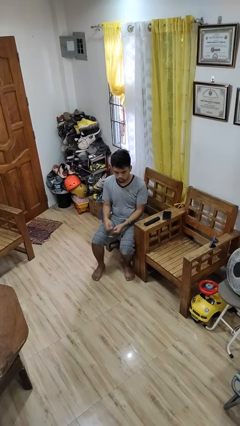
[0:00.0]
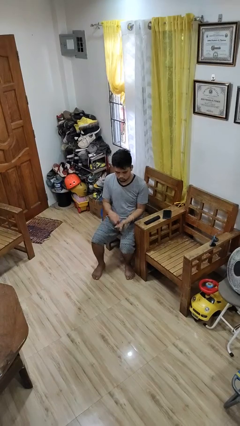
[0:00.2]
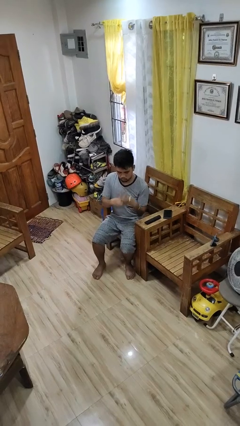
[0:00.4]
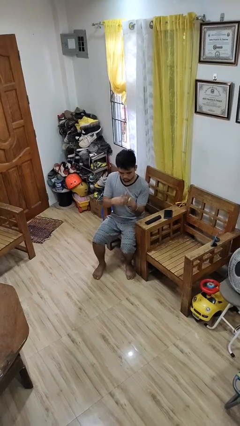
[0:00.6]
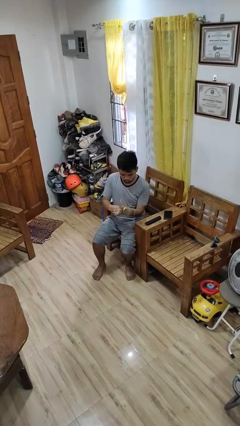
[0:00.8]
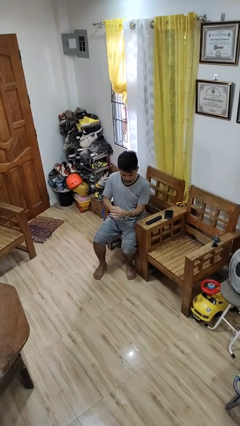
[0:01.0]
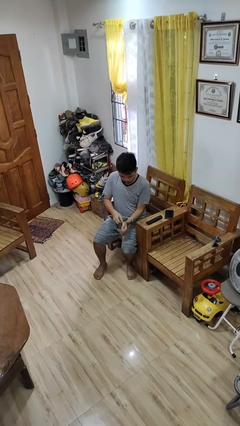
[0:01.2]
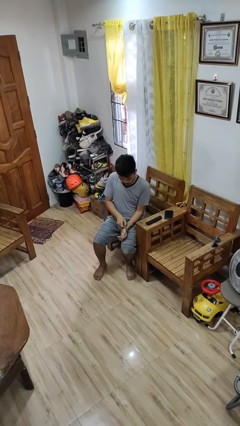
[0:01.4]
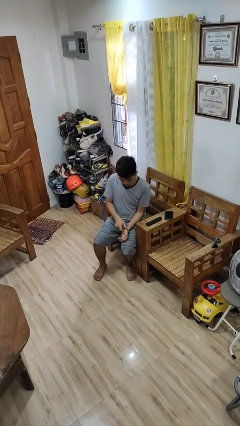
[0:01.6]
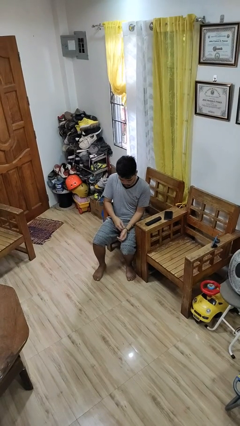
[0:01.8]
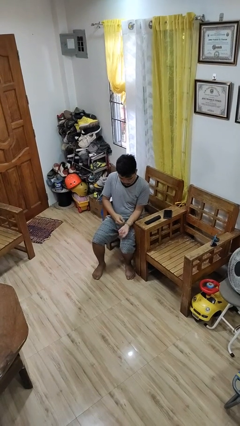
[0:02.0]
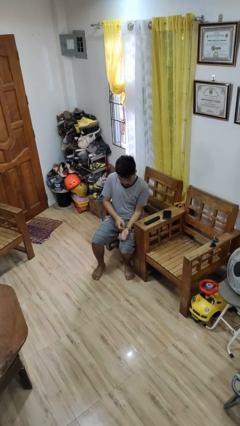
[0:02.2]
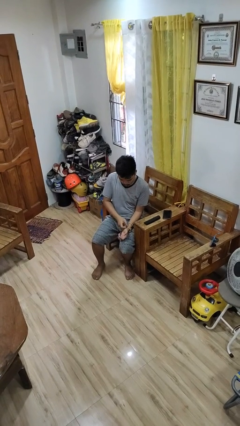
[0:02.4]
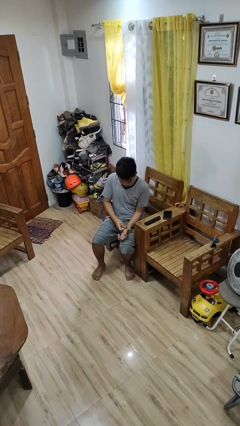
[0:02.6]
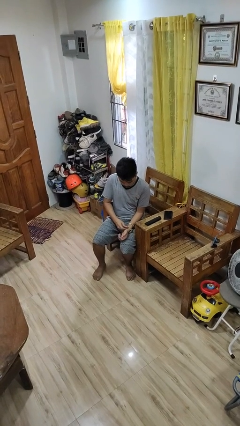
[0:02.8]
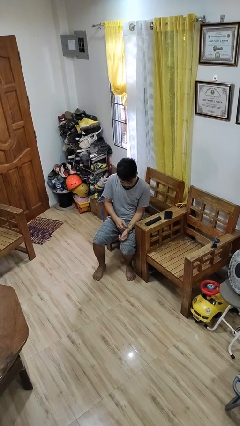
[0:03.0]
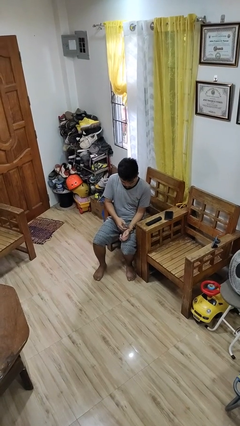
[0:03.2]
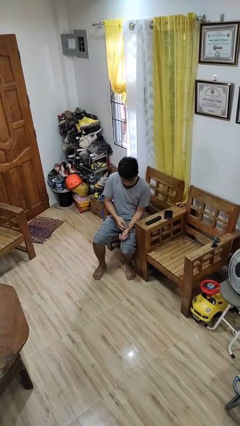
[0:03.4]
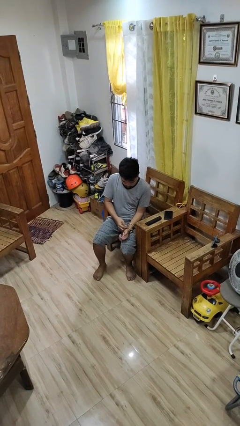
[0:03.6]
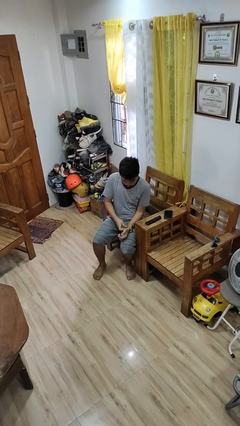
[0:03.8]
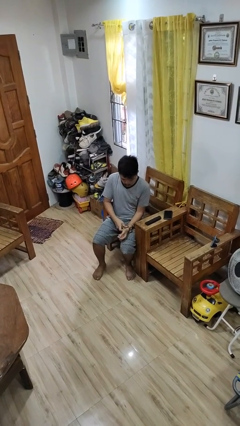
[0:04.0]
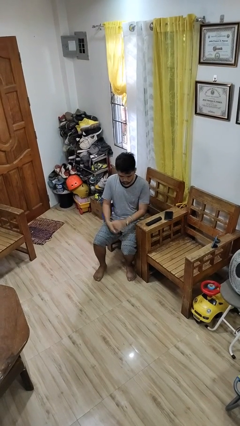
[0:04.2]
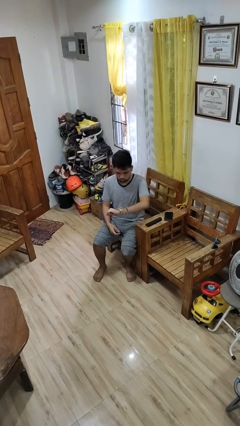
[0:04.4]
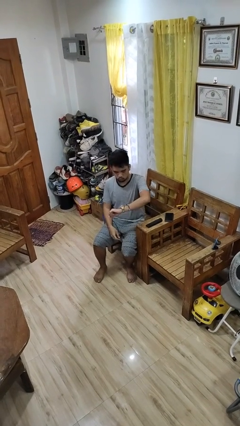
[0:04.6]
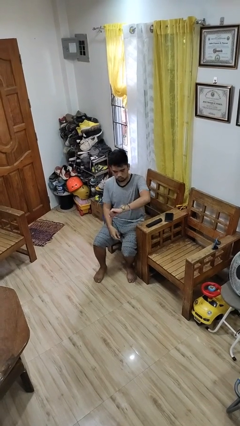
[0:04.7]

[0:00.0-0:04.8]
person puts on wristwatch

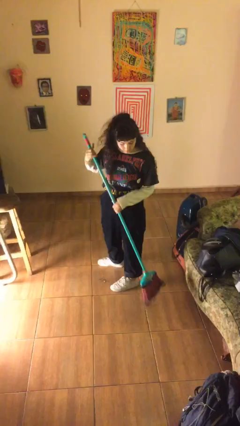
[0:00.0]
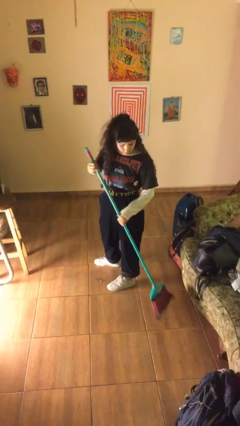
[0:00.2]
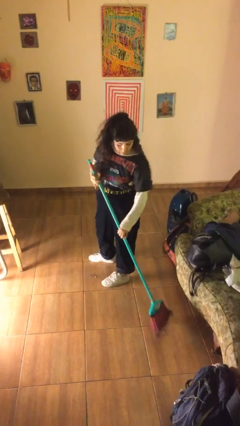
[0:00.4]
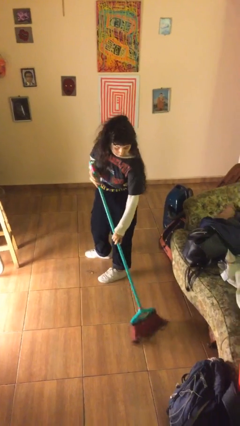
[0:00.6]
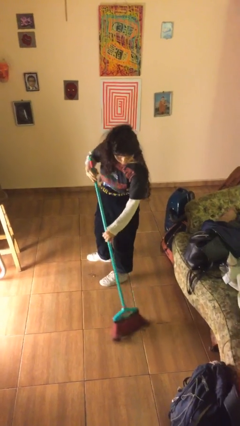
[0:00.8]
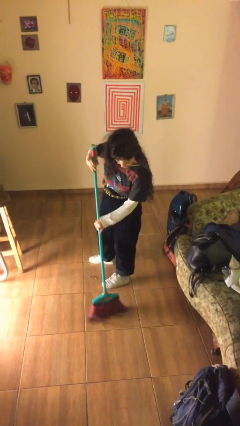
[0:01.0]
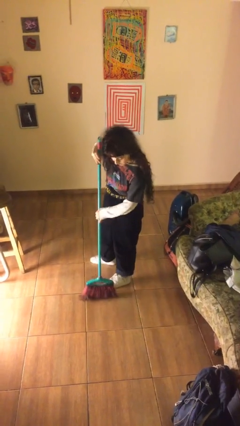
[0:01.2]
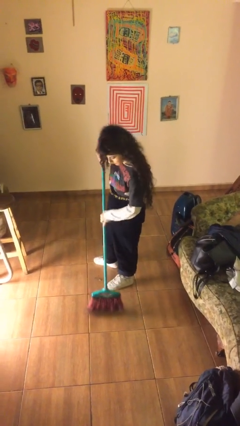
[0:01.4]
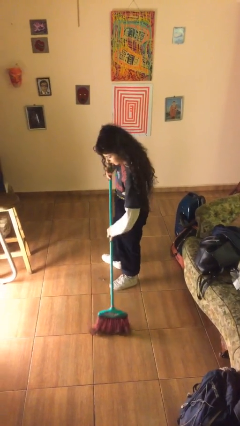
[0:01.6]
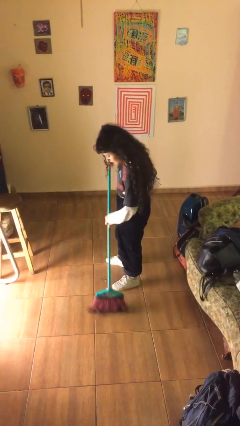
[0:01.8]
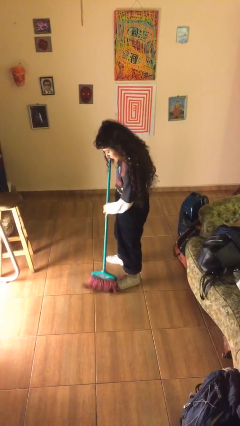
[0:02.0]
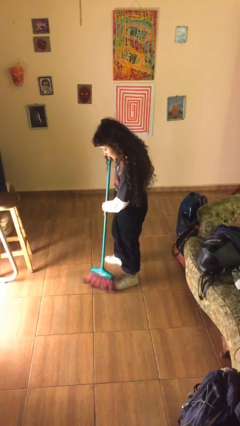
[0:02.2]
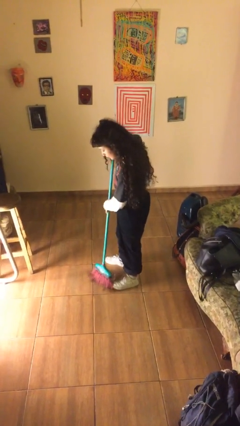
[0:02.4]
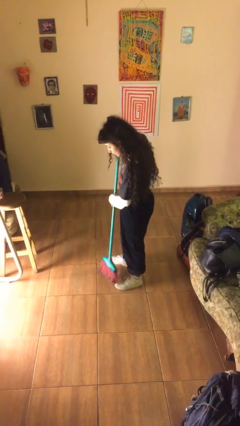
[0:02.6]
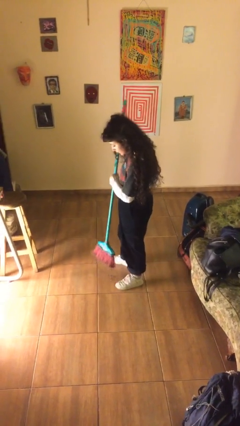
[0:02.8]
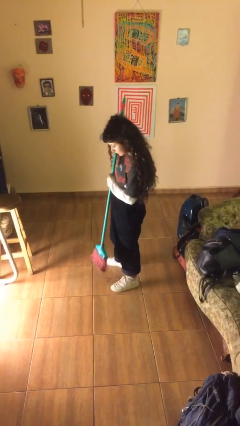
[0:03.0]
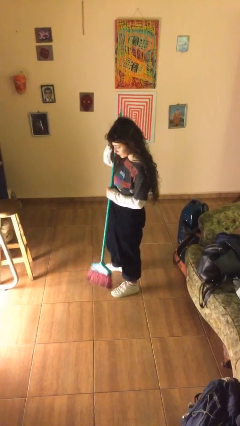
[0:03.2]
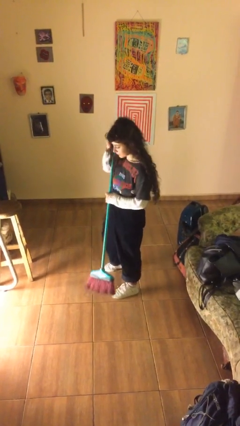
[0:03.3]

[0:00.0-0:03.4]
person sweeps floor

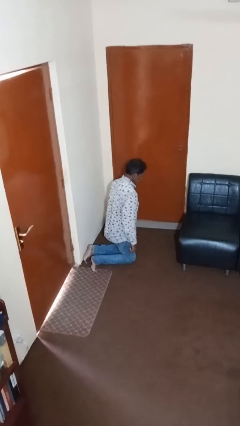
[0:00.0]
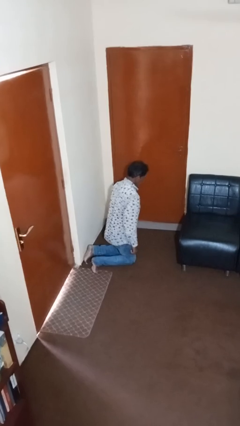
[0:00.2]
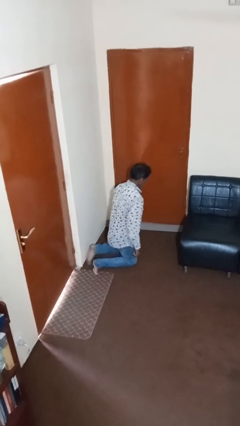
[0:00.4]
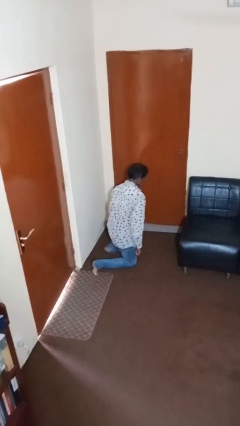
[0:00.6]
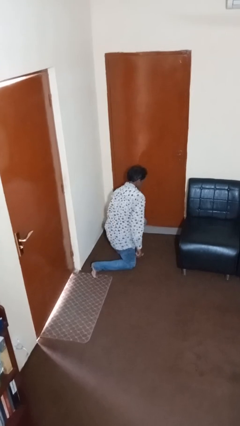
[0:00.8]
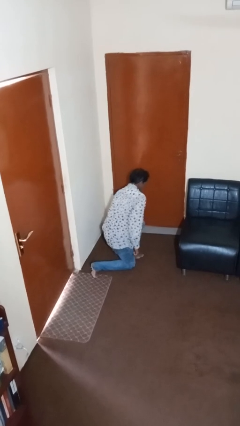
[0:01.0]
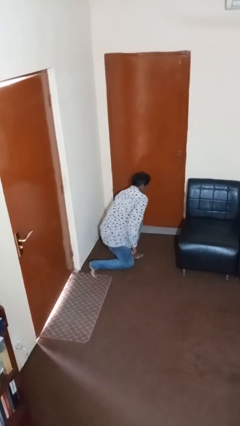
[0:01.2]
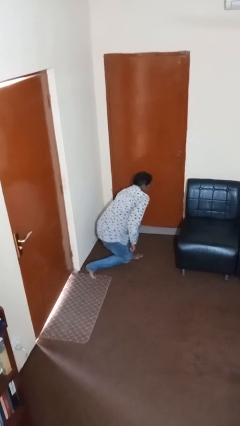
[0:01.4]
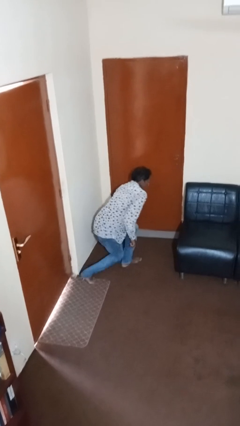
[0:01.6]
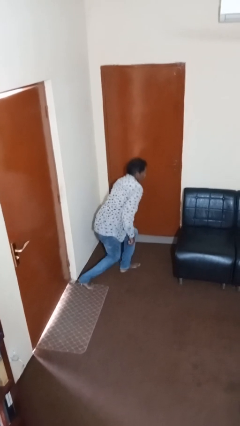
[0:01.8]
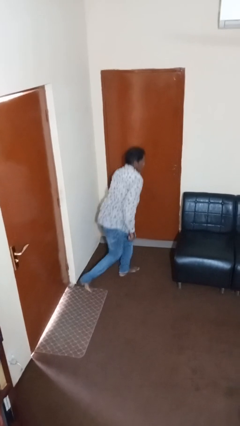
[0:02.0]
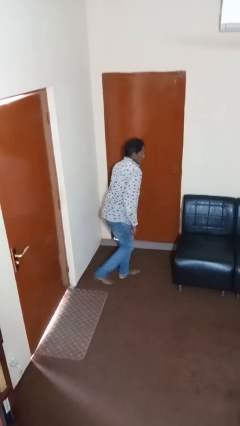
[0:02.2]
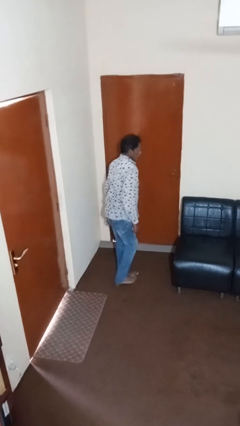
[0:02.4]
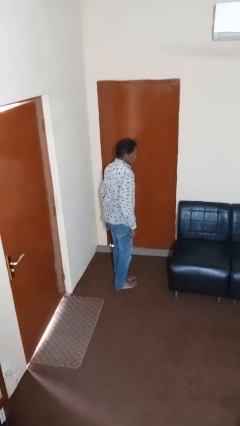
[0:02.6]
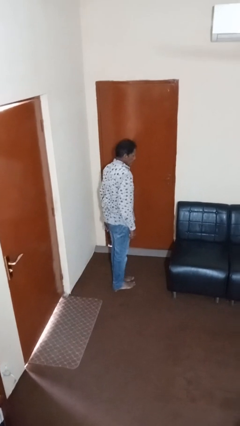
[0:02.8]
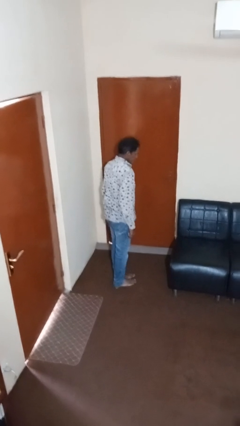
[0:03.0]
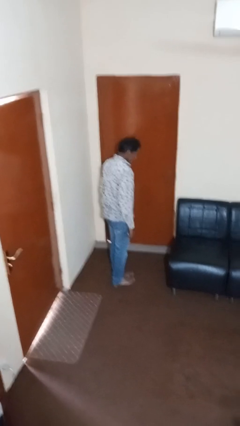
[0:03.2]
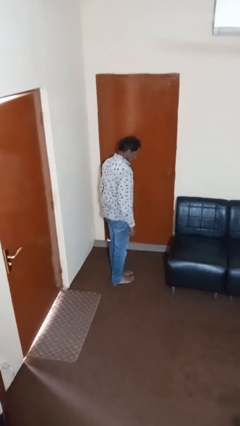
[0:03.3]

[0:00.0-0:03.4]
person stands up

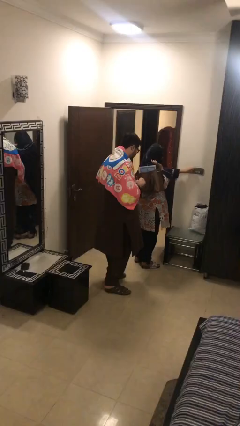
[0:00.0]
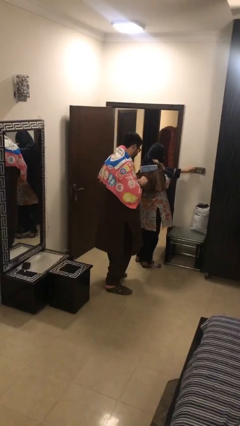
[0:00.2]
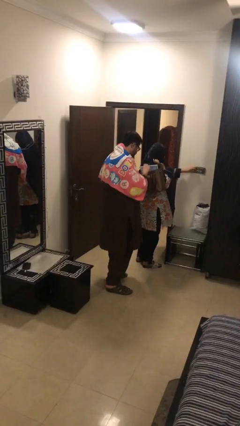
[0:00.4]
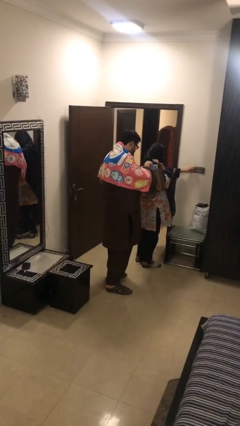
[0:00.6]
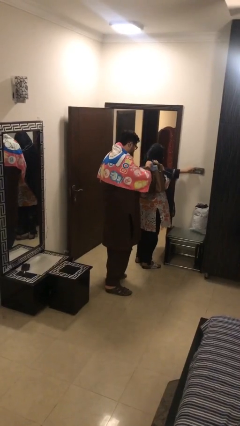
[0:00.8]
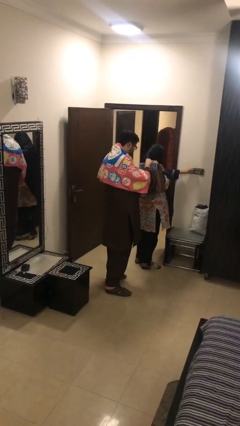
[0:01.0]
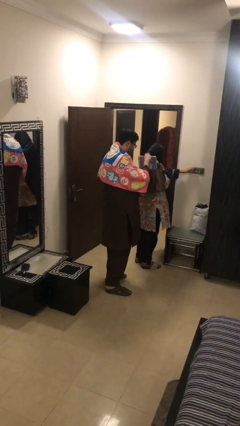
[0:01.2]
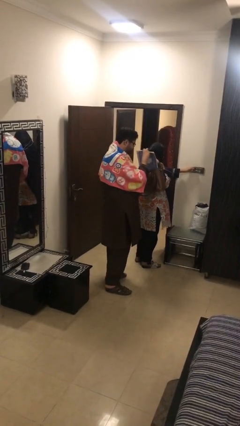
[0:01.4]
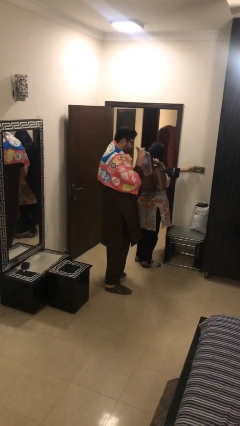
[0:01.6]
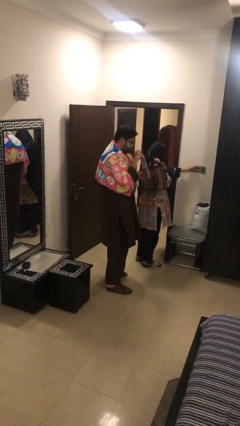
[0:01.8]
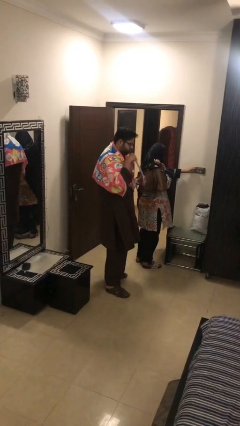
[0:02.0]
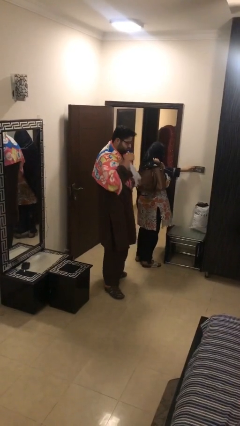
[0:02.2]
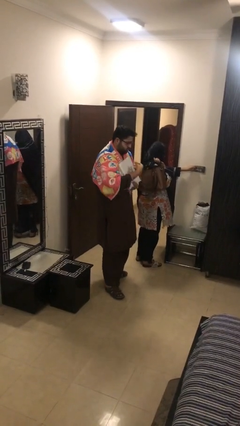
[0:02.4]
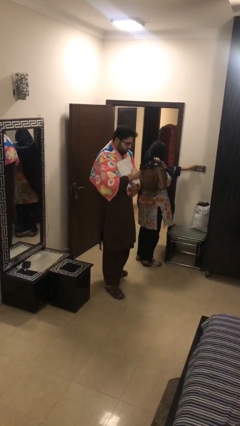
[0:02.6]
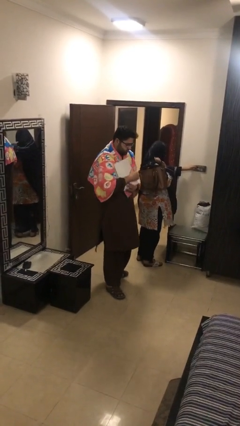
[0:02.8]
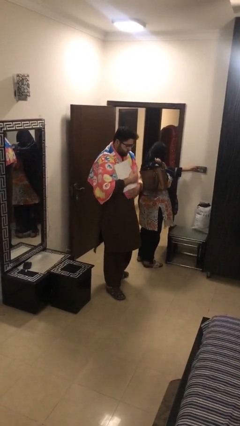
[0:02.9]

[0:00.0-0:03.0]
person steals object from person

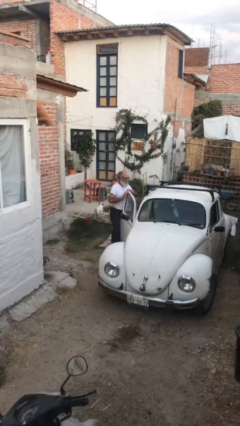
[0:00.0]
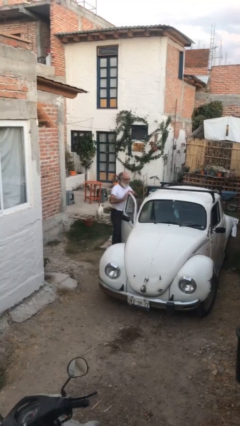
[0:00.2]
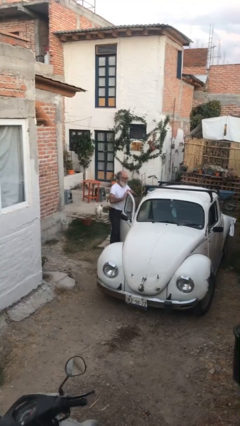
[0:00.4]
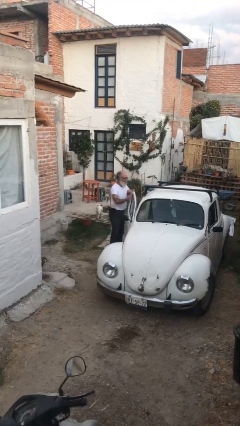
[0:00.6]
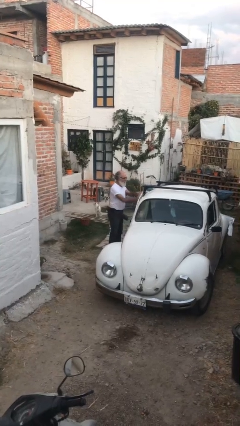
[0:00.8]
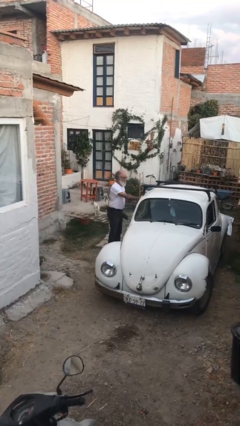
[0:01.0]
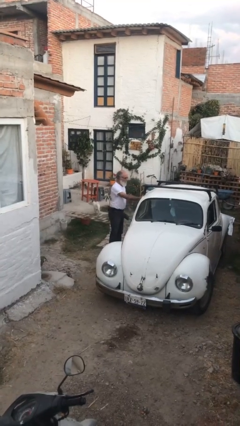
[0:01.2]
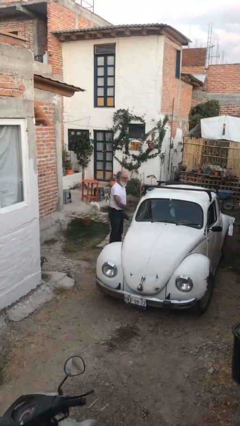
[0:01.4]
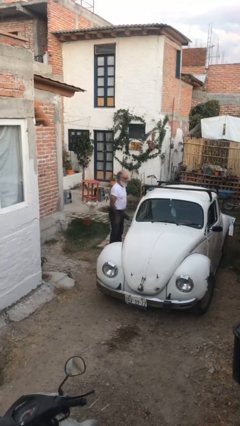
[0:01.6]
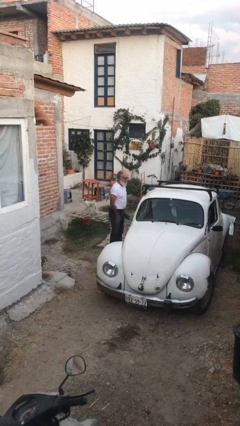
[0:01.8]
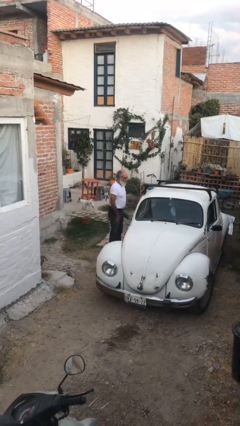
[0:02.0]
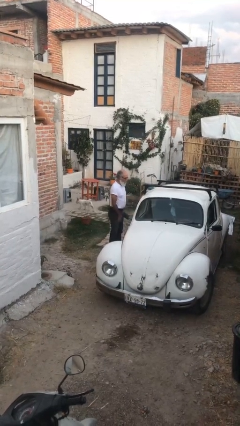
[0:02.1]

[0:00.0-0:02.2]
person closes car door

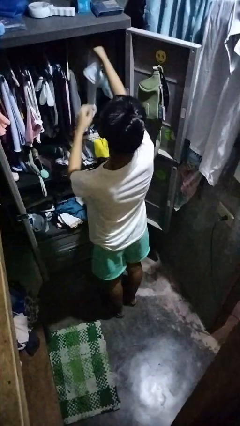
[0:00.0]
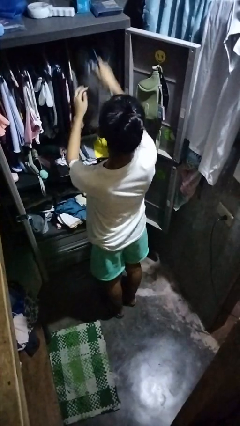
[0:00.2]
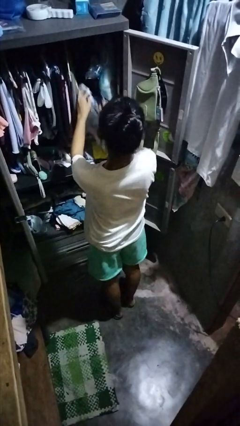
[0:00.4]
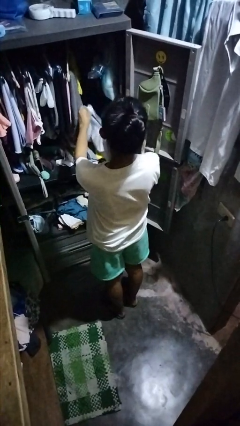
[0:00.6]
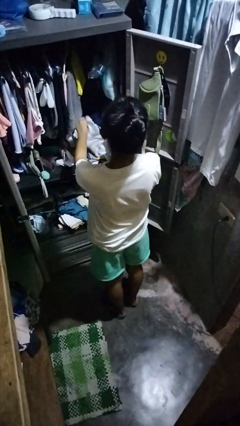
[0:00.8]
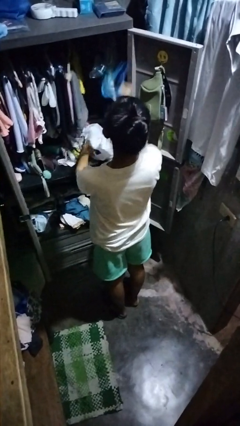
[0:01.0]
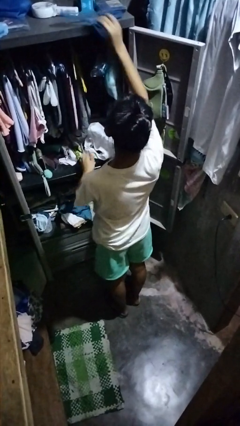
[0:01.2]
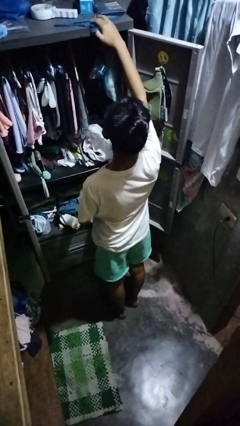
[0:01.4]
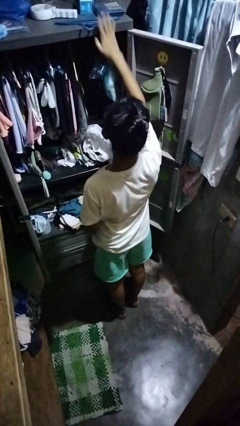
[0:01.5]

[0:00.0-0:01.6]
person takes clothes from closet
